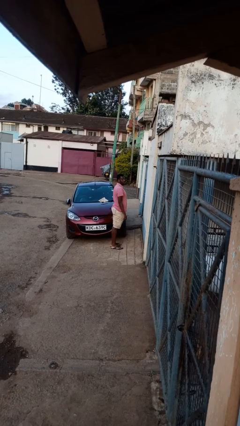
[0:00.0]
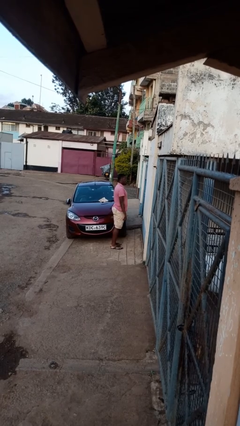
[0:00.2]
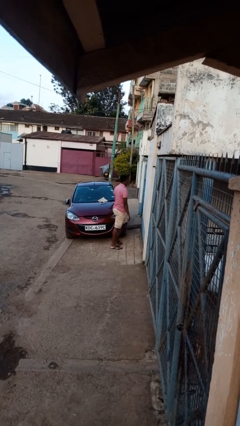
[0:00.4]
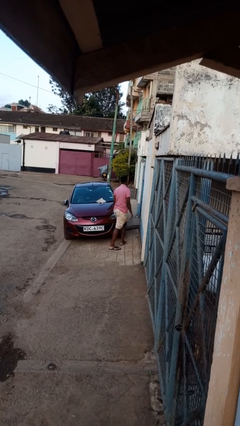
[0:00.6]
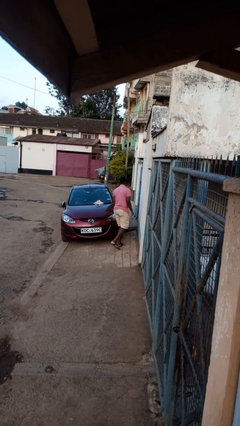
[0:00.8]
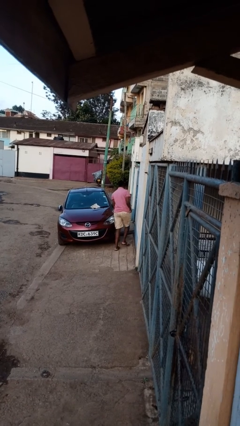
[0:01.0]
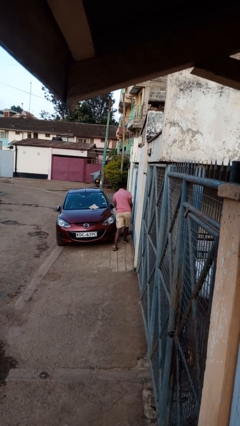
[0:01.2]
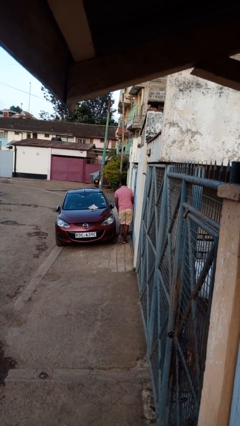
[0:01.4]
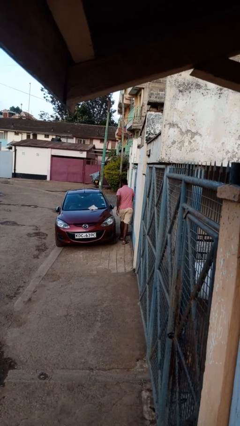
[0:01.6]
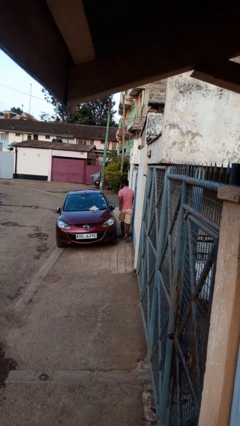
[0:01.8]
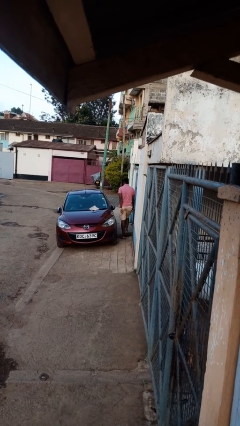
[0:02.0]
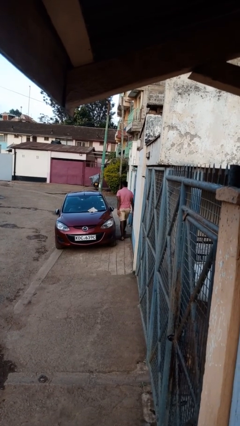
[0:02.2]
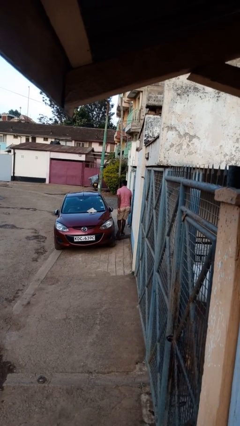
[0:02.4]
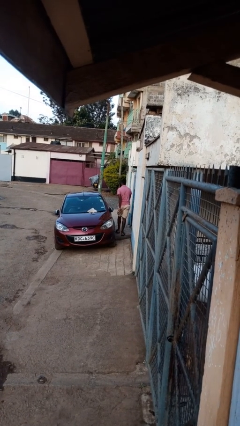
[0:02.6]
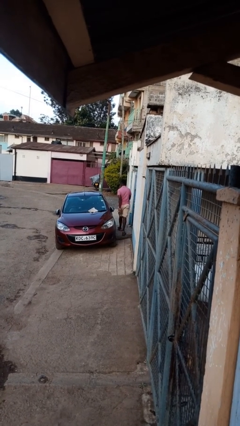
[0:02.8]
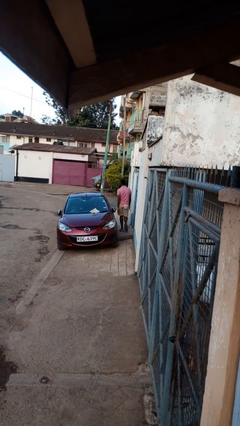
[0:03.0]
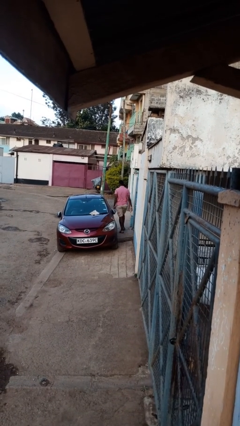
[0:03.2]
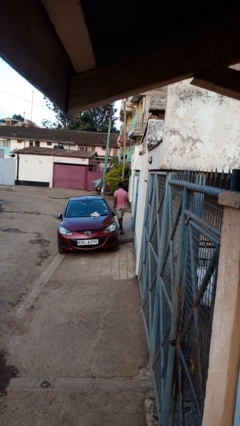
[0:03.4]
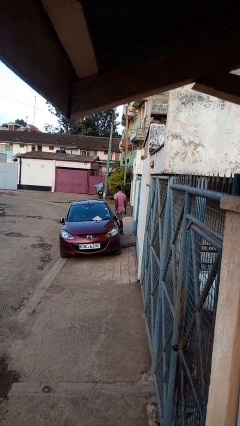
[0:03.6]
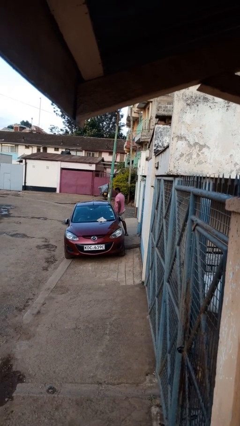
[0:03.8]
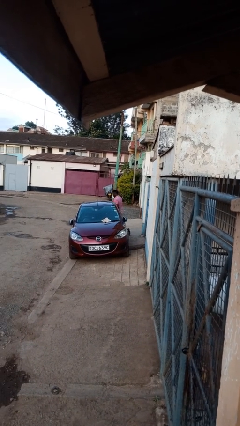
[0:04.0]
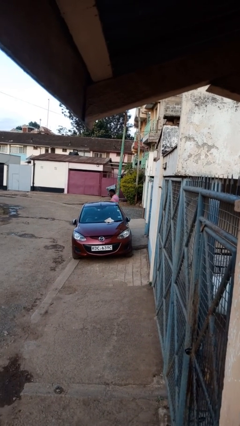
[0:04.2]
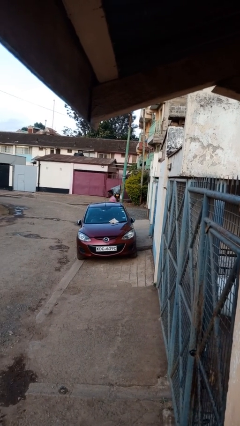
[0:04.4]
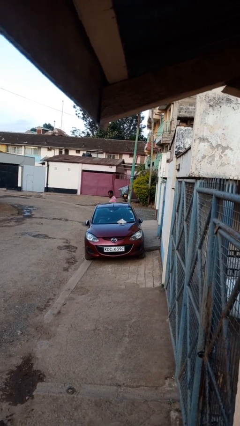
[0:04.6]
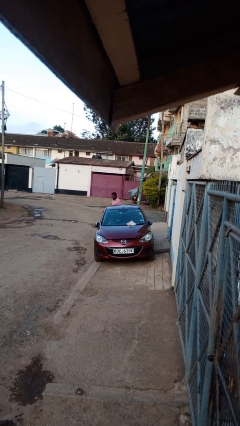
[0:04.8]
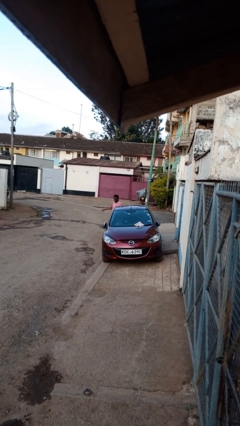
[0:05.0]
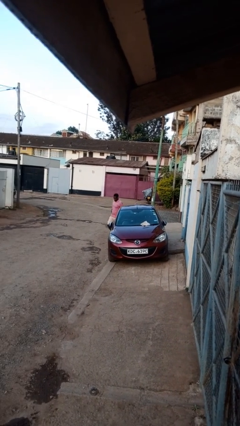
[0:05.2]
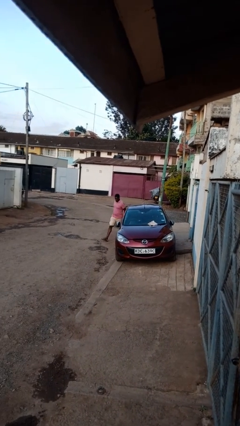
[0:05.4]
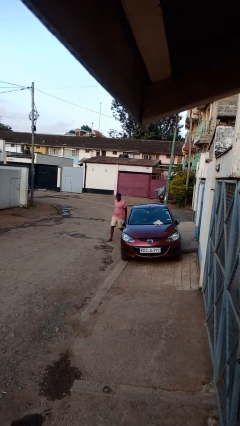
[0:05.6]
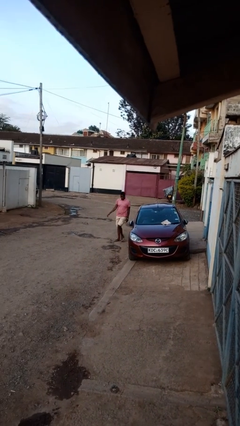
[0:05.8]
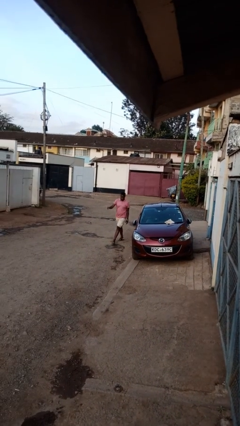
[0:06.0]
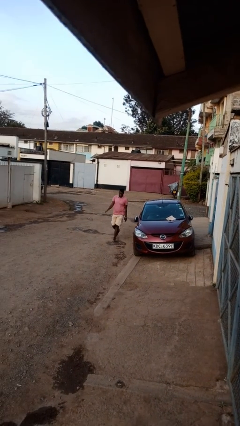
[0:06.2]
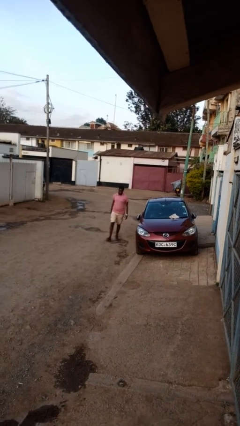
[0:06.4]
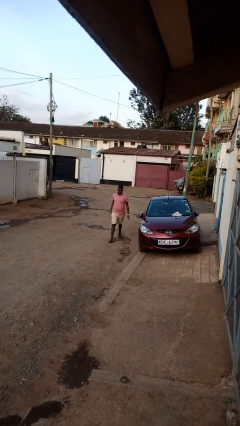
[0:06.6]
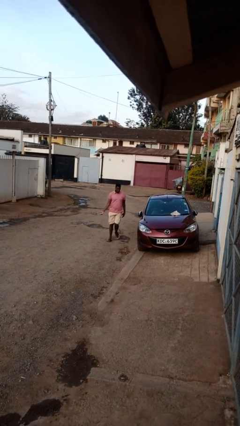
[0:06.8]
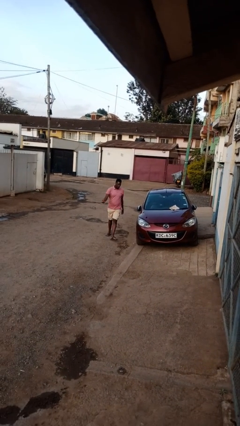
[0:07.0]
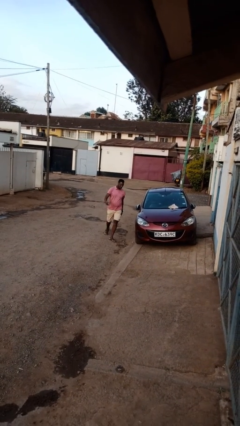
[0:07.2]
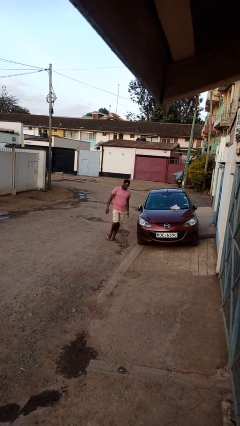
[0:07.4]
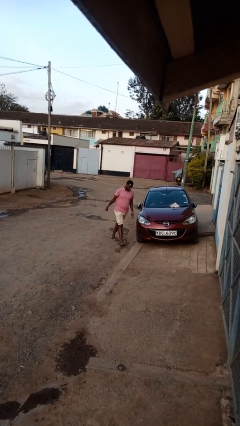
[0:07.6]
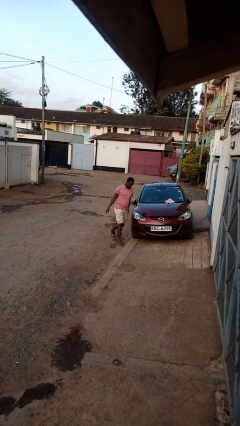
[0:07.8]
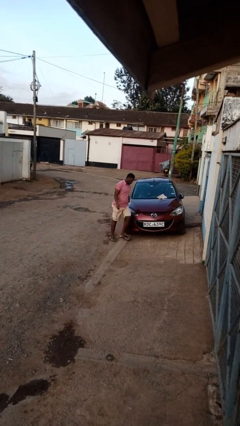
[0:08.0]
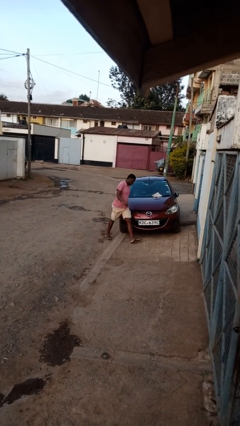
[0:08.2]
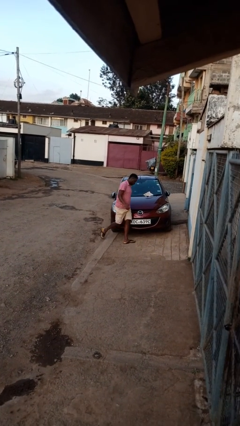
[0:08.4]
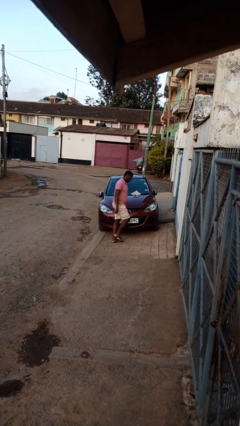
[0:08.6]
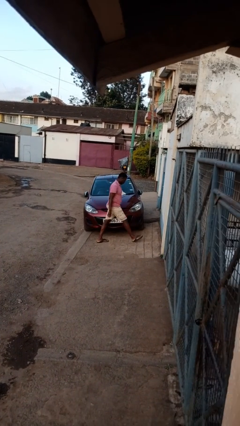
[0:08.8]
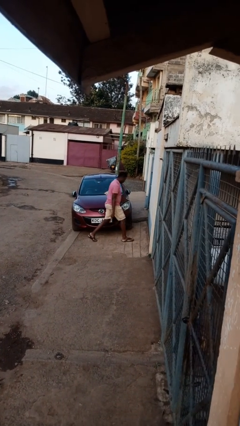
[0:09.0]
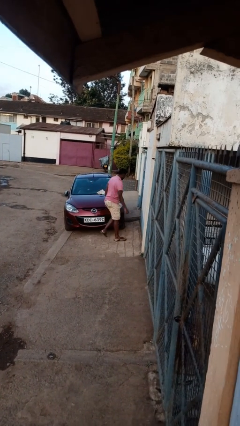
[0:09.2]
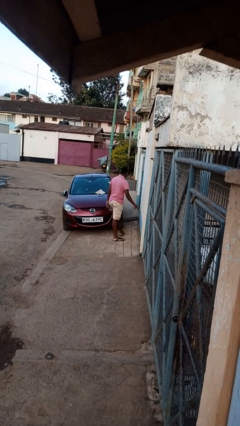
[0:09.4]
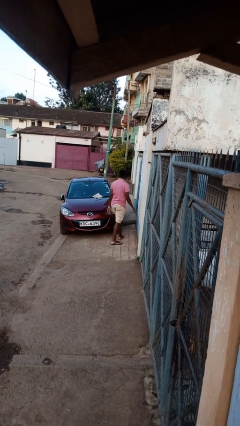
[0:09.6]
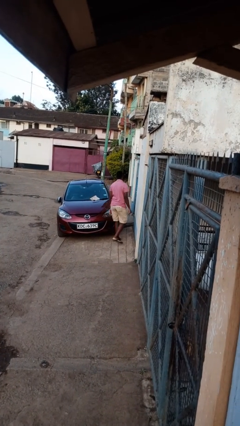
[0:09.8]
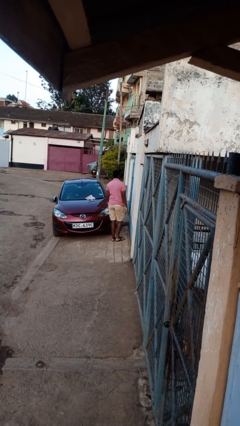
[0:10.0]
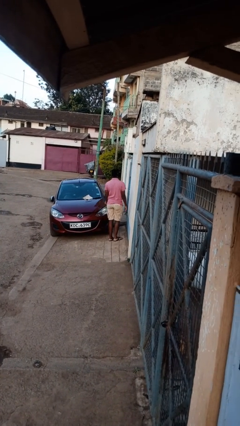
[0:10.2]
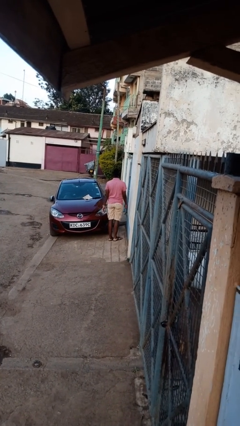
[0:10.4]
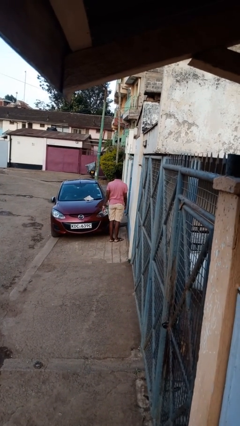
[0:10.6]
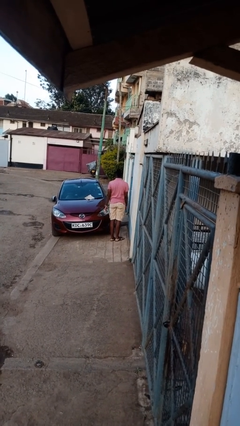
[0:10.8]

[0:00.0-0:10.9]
person walks around car

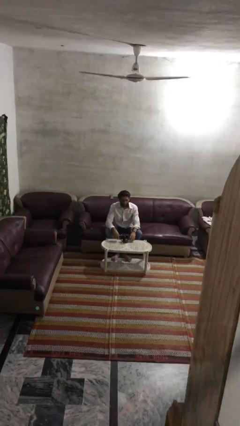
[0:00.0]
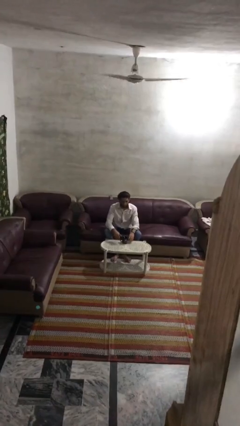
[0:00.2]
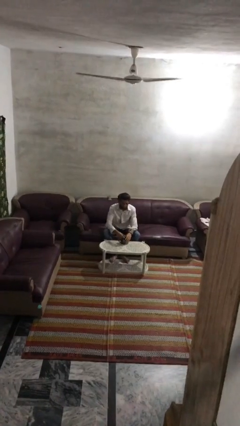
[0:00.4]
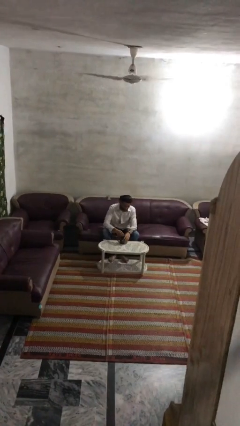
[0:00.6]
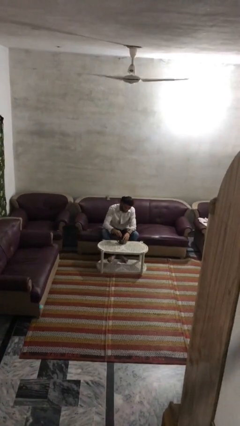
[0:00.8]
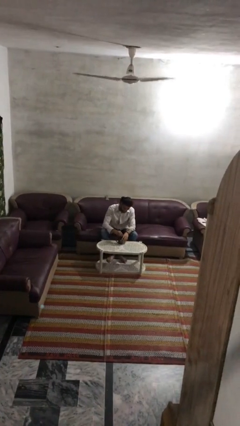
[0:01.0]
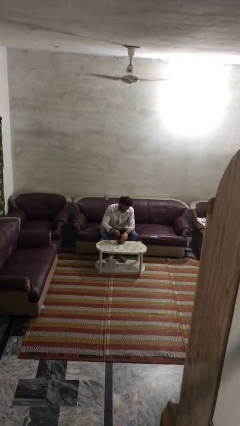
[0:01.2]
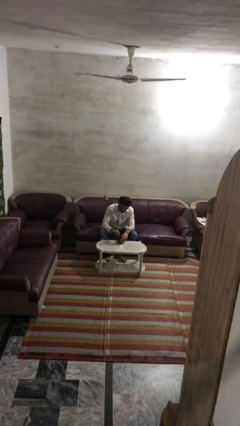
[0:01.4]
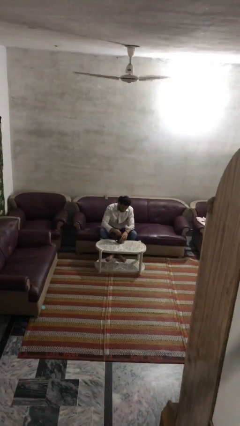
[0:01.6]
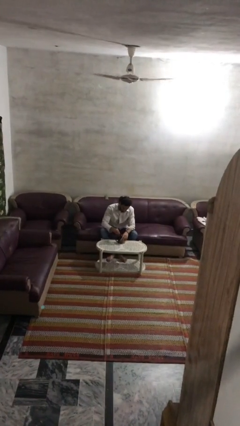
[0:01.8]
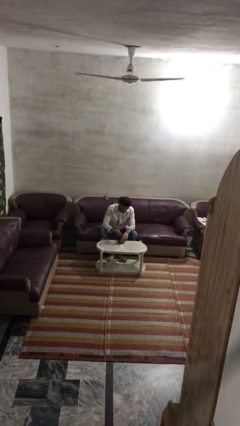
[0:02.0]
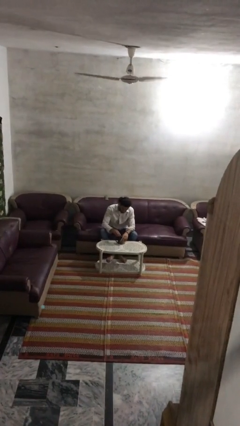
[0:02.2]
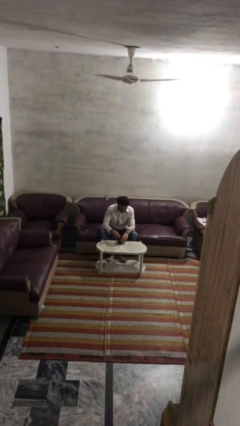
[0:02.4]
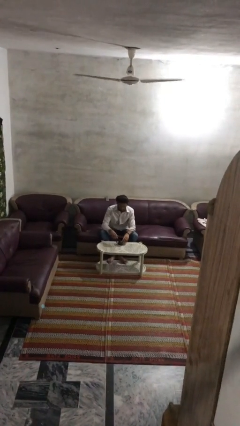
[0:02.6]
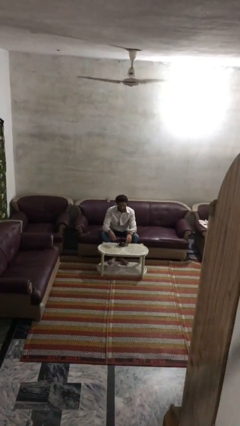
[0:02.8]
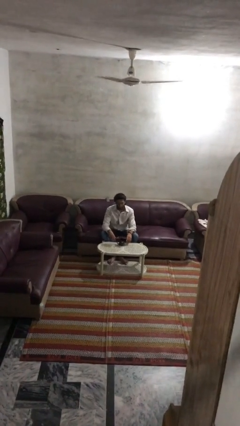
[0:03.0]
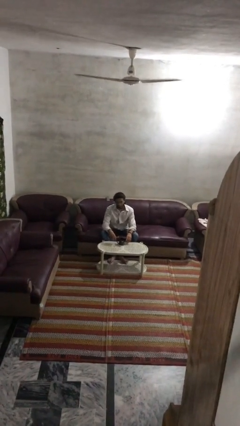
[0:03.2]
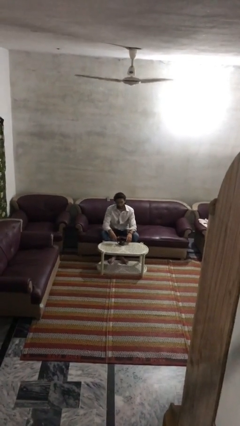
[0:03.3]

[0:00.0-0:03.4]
person stirs mug

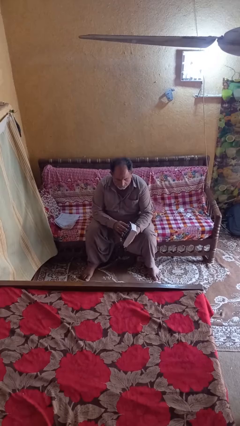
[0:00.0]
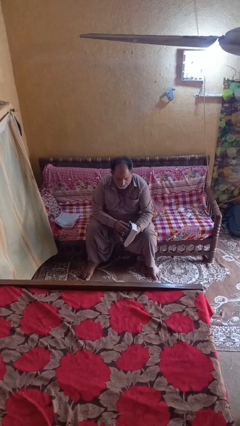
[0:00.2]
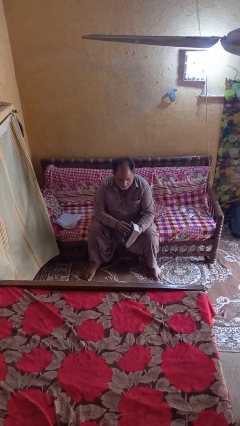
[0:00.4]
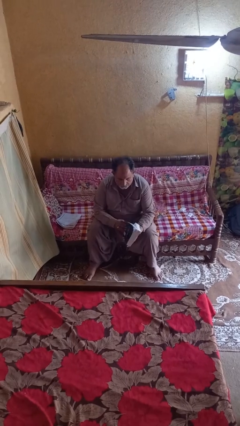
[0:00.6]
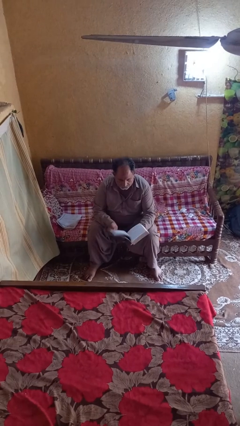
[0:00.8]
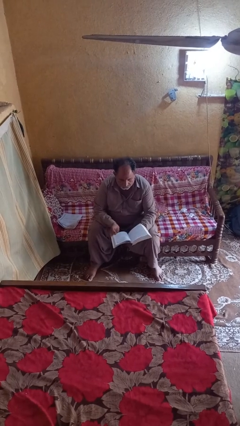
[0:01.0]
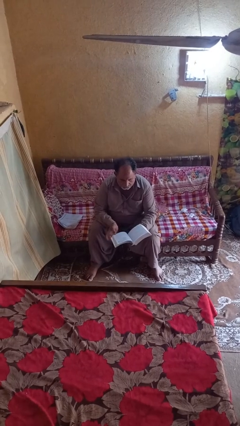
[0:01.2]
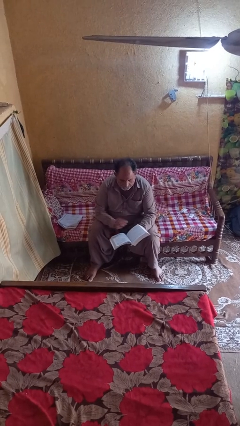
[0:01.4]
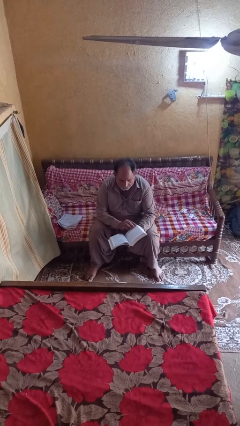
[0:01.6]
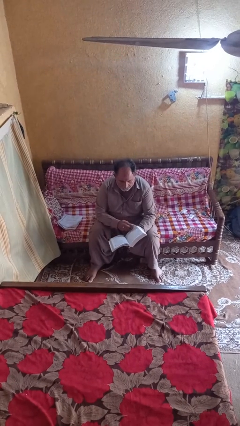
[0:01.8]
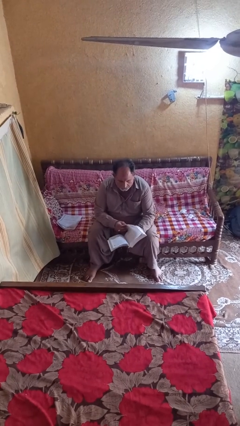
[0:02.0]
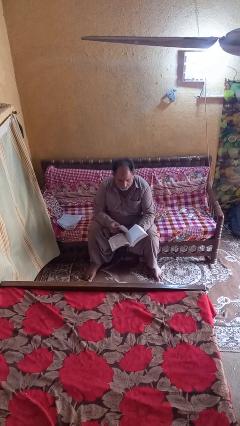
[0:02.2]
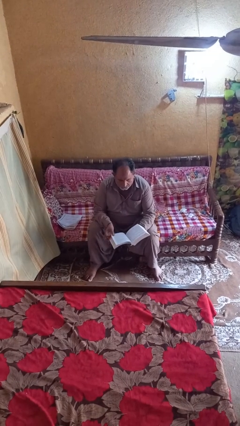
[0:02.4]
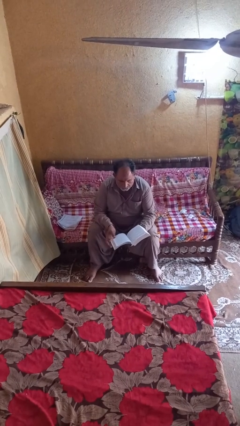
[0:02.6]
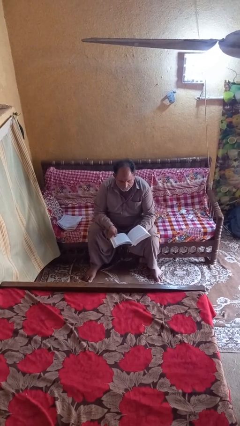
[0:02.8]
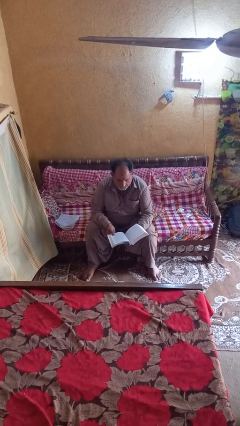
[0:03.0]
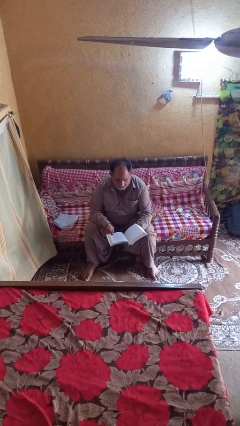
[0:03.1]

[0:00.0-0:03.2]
person reads book

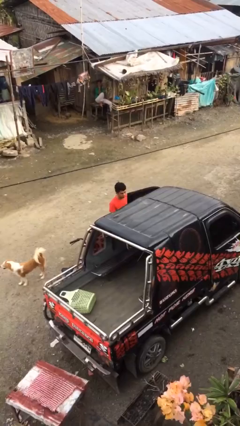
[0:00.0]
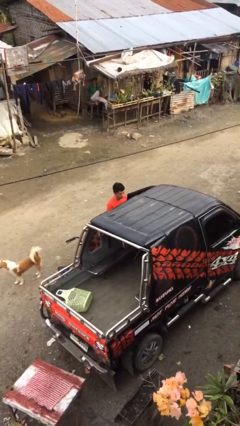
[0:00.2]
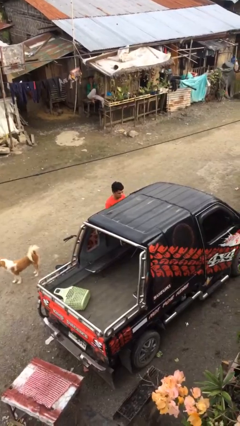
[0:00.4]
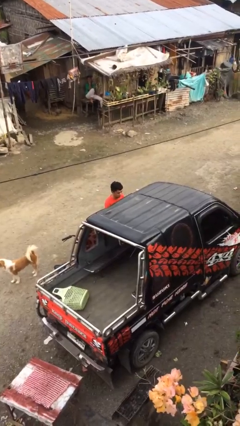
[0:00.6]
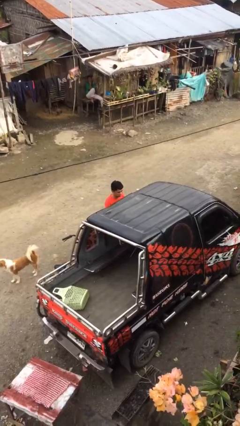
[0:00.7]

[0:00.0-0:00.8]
person closes car door
